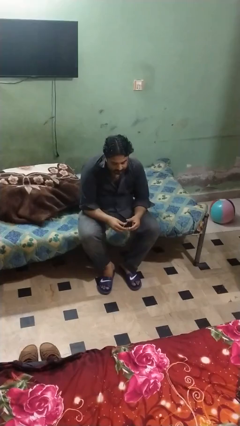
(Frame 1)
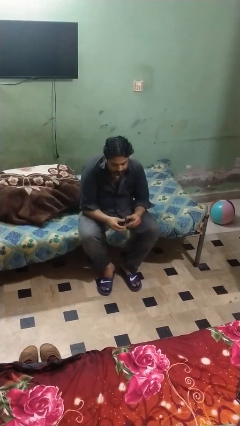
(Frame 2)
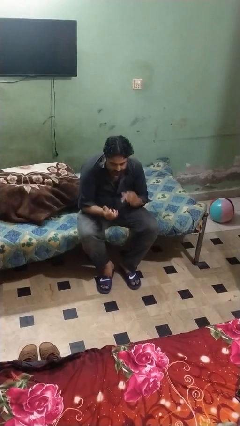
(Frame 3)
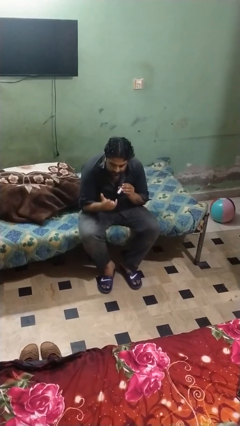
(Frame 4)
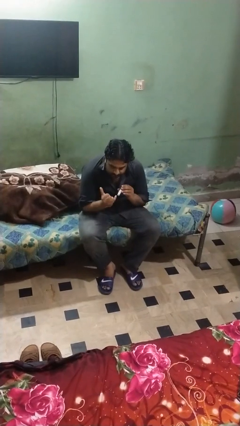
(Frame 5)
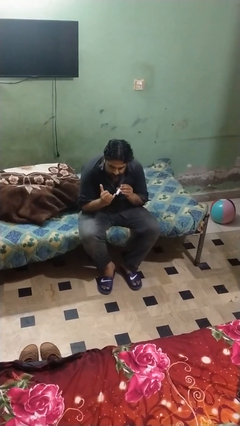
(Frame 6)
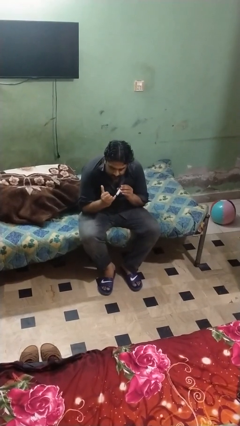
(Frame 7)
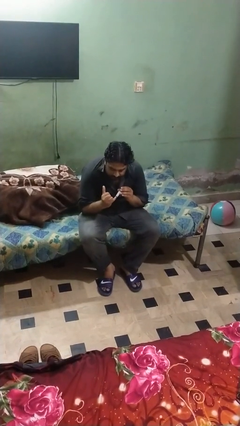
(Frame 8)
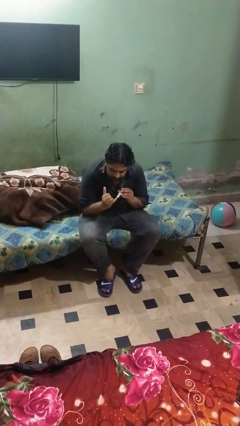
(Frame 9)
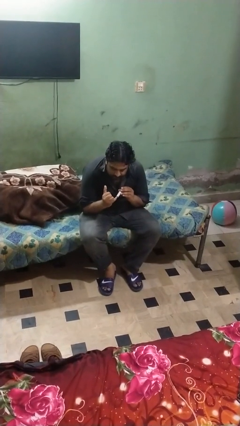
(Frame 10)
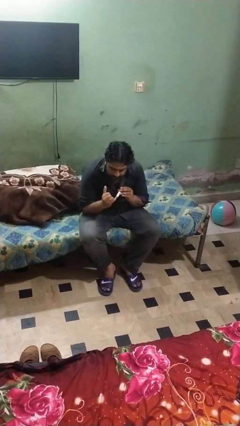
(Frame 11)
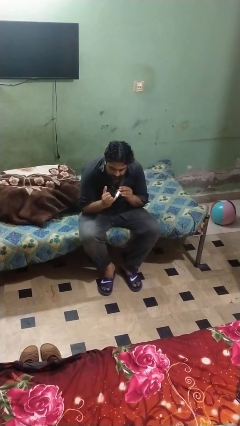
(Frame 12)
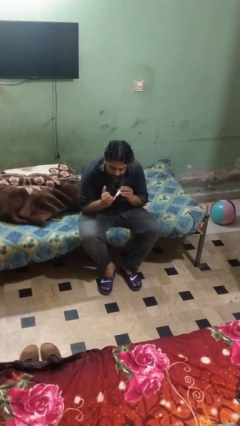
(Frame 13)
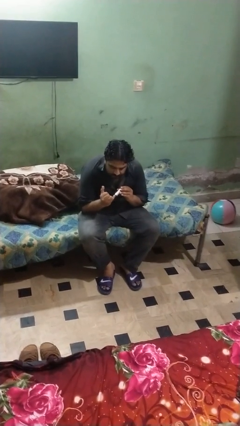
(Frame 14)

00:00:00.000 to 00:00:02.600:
person clips fingernails

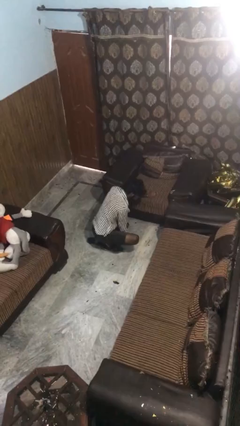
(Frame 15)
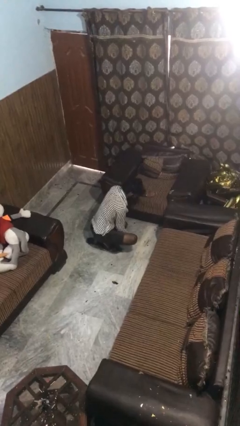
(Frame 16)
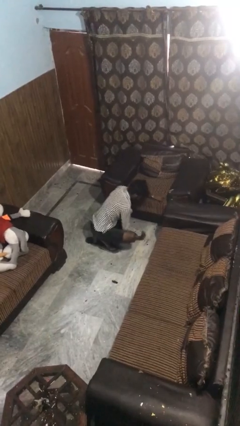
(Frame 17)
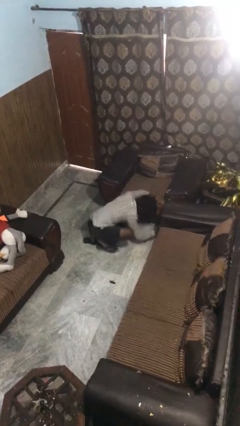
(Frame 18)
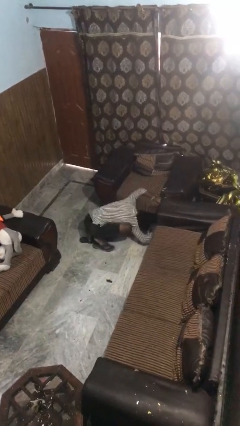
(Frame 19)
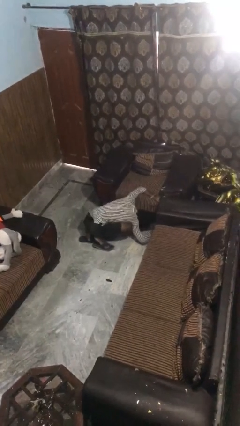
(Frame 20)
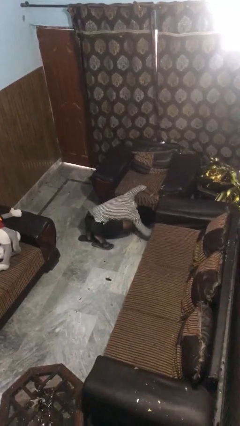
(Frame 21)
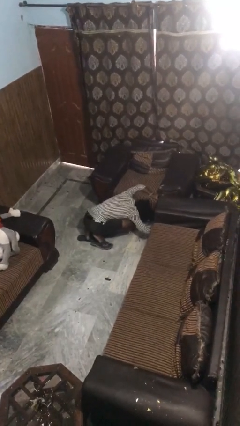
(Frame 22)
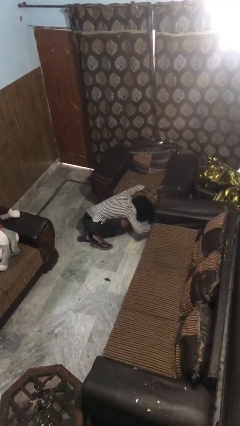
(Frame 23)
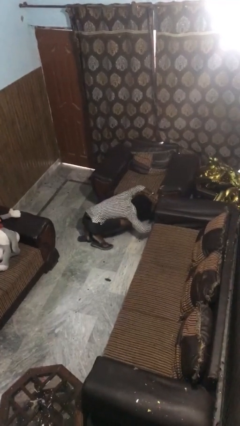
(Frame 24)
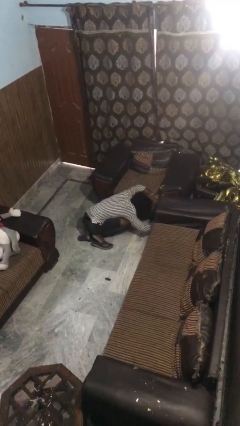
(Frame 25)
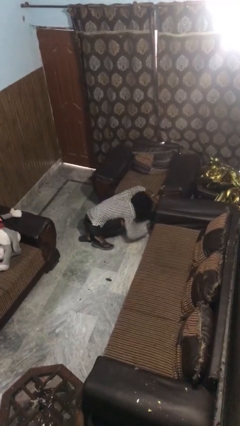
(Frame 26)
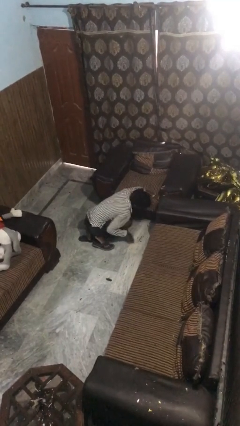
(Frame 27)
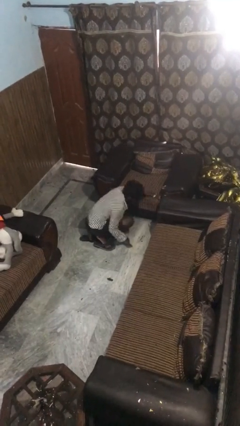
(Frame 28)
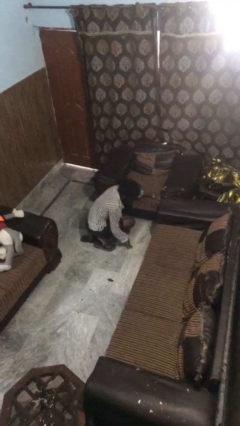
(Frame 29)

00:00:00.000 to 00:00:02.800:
person searches under couch

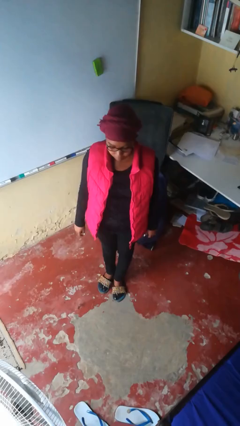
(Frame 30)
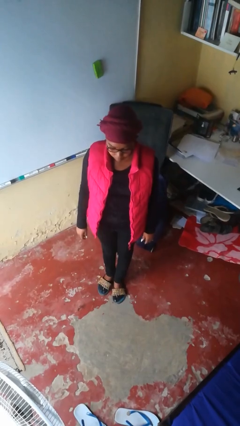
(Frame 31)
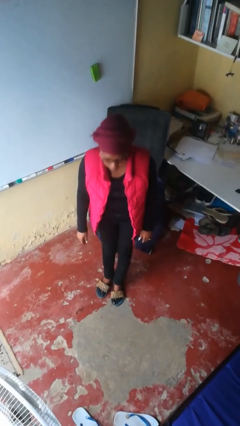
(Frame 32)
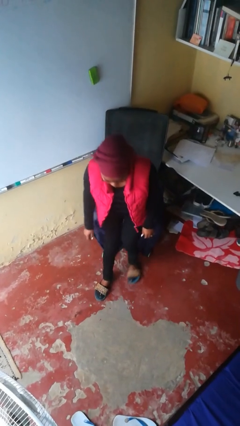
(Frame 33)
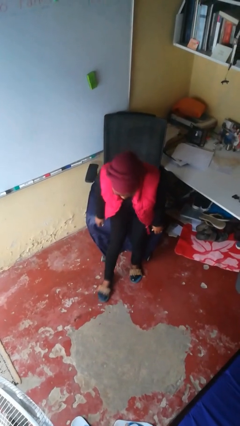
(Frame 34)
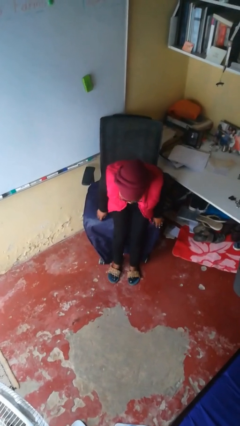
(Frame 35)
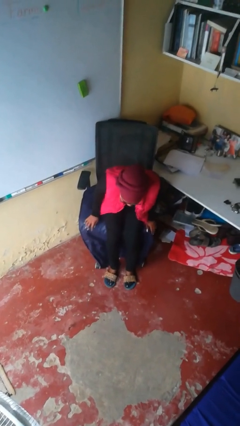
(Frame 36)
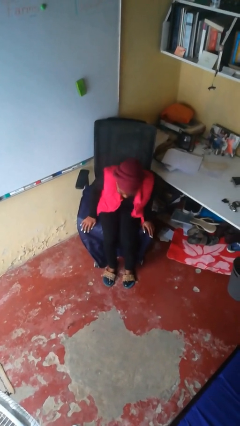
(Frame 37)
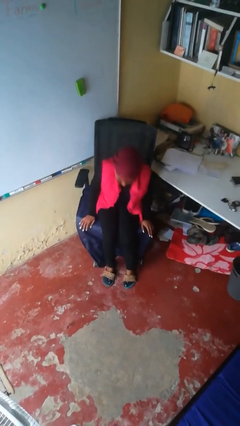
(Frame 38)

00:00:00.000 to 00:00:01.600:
person sits down

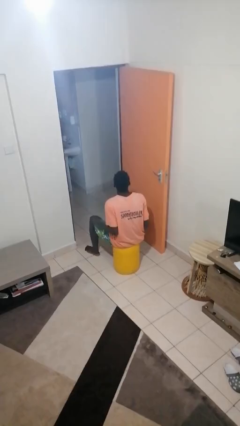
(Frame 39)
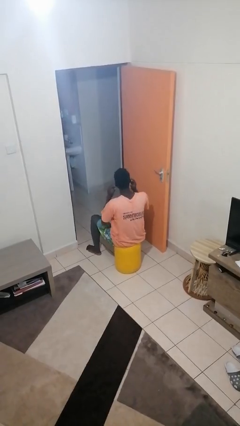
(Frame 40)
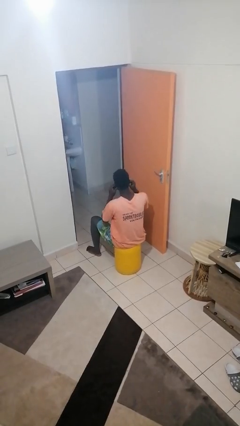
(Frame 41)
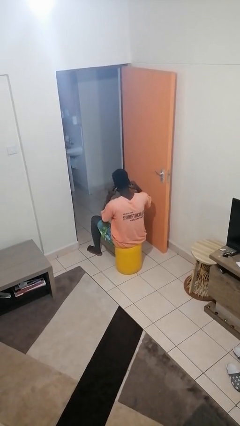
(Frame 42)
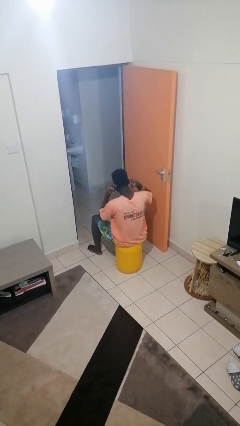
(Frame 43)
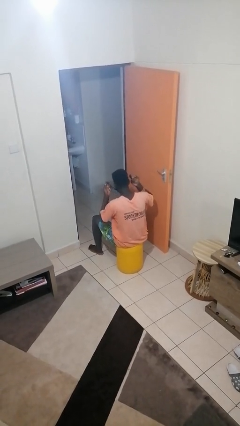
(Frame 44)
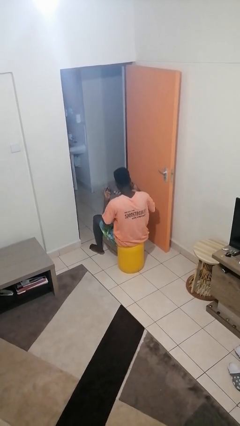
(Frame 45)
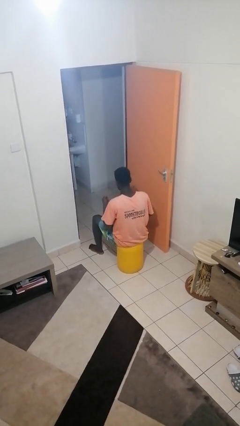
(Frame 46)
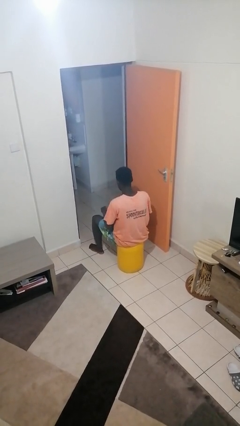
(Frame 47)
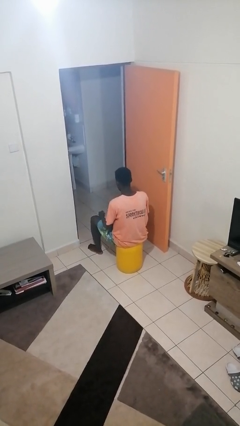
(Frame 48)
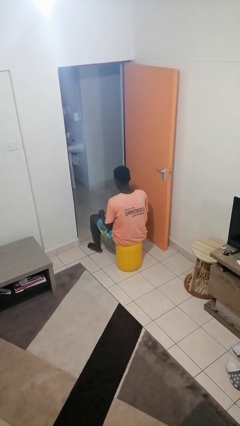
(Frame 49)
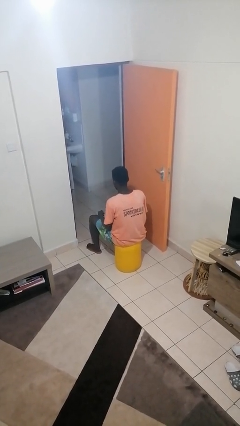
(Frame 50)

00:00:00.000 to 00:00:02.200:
person takes off facemask

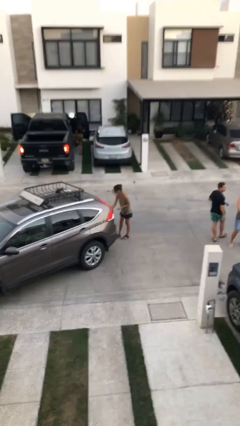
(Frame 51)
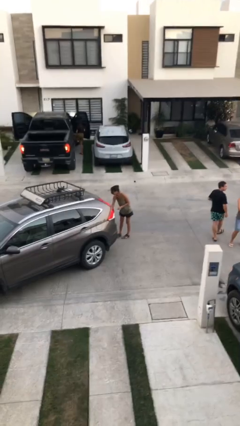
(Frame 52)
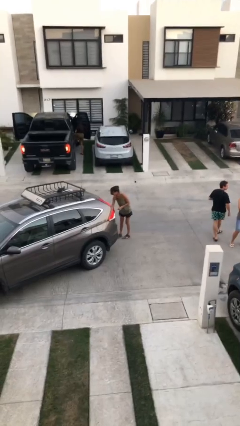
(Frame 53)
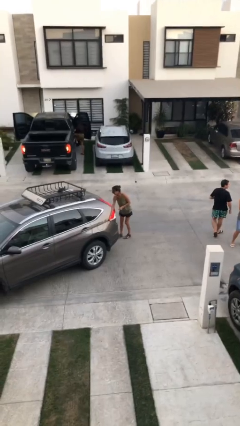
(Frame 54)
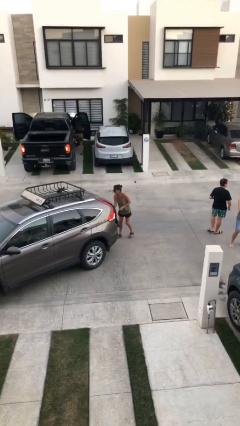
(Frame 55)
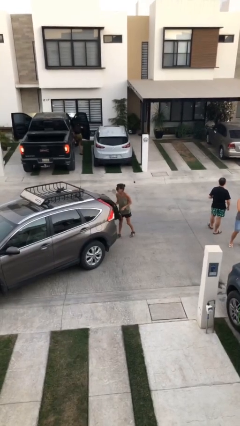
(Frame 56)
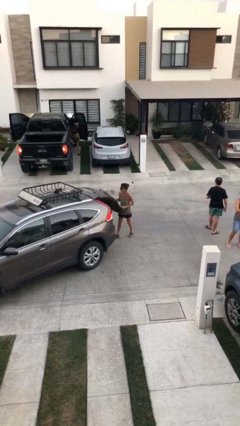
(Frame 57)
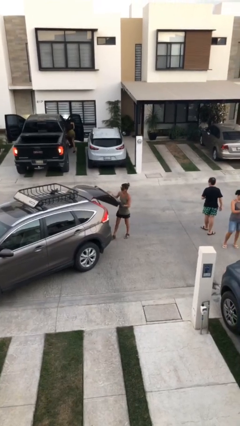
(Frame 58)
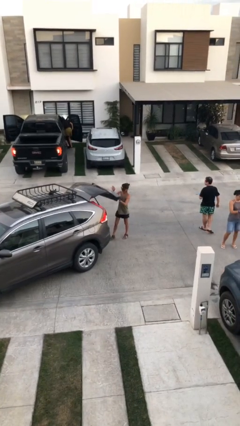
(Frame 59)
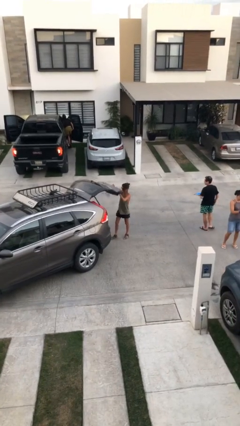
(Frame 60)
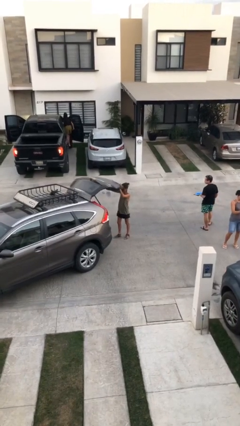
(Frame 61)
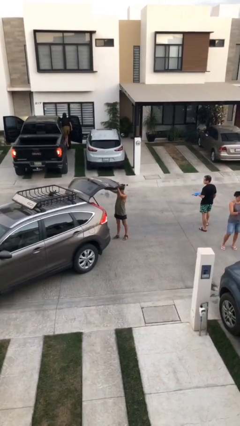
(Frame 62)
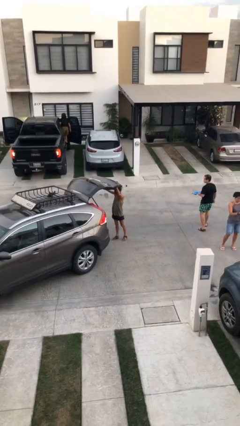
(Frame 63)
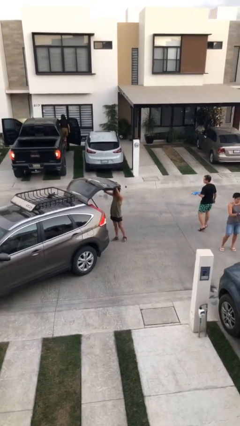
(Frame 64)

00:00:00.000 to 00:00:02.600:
person opens car trunk

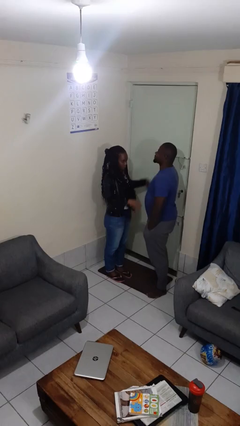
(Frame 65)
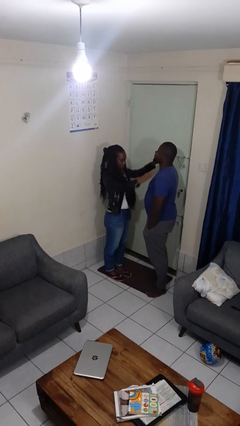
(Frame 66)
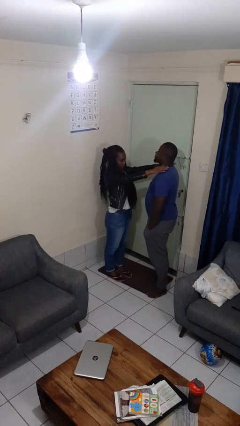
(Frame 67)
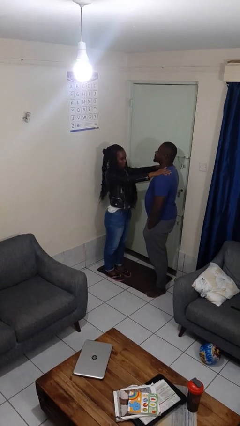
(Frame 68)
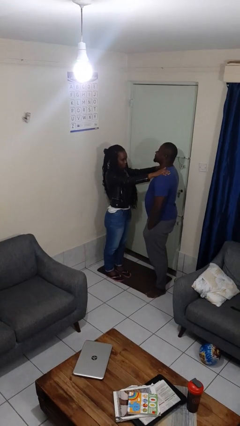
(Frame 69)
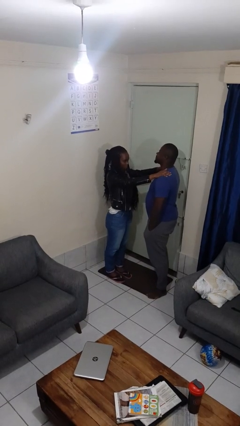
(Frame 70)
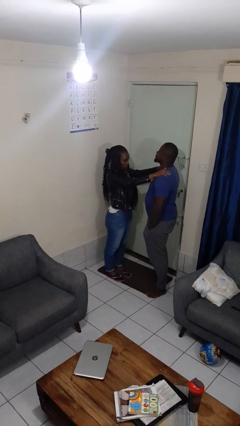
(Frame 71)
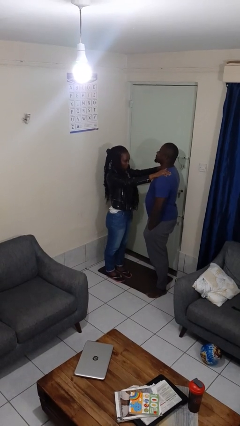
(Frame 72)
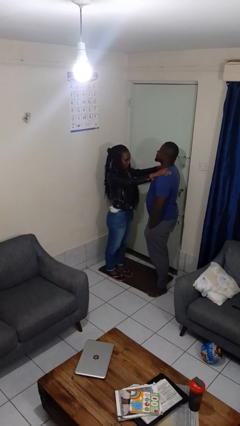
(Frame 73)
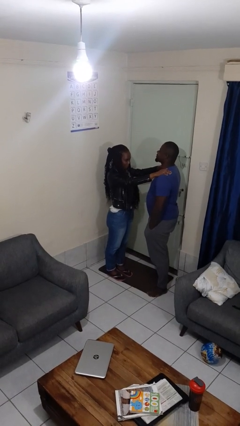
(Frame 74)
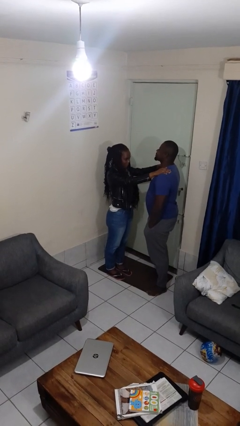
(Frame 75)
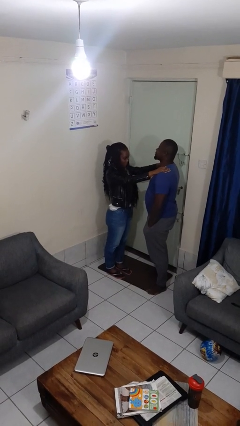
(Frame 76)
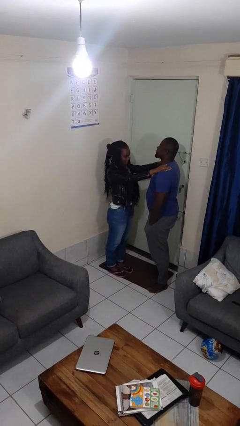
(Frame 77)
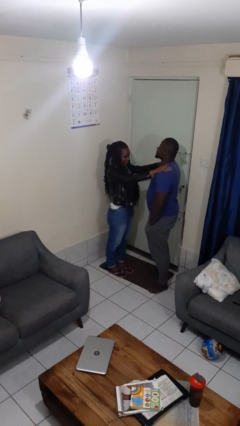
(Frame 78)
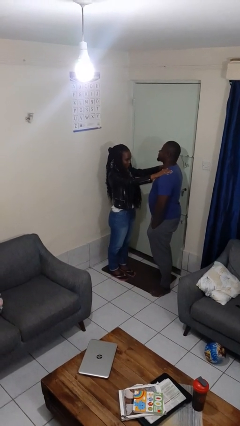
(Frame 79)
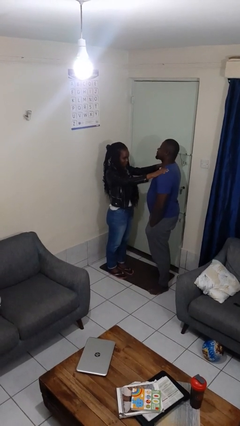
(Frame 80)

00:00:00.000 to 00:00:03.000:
person pounds shoulders of person

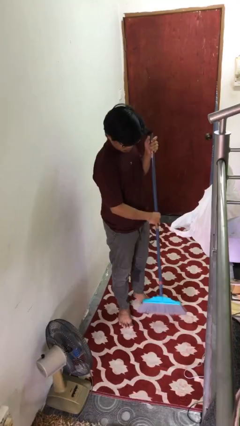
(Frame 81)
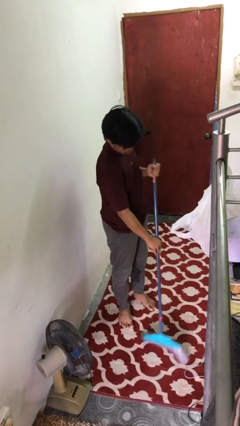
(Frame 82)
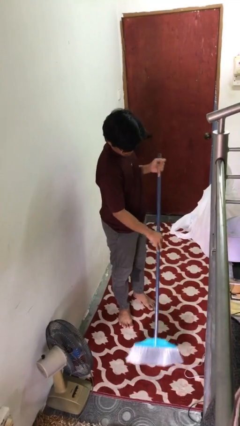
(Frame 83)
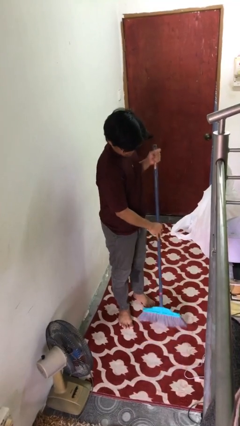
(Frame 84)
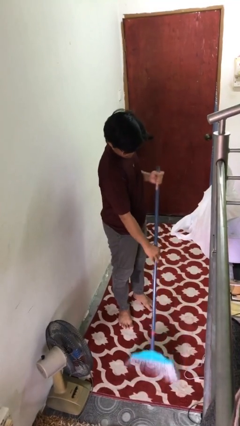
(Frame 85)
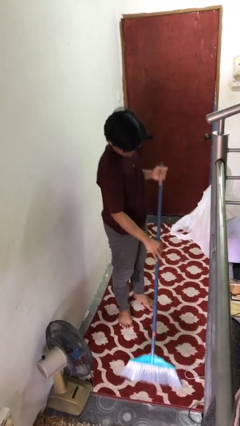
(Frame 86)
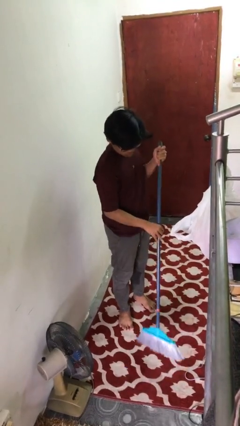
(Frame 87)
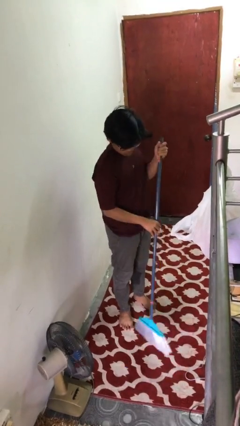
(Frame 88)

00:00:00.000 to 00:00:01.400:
person sweeps floor

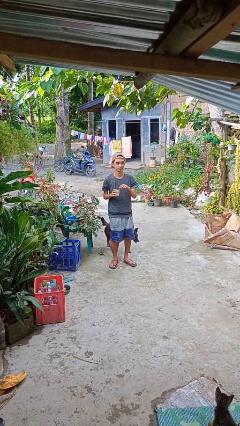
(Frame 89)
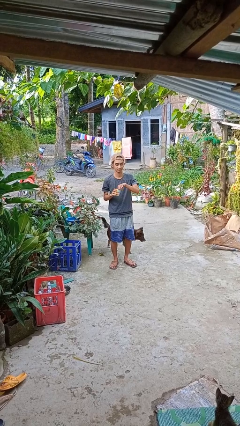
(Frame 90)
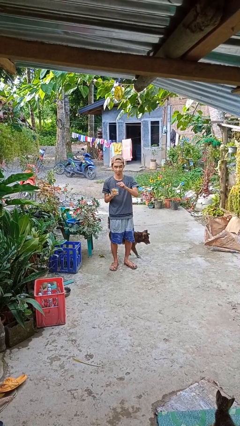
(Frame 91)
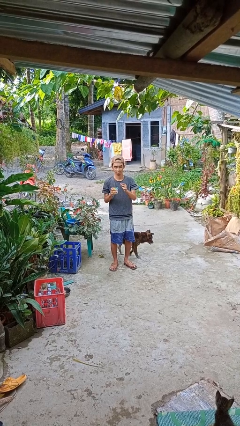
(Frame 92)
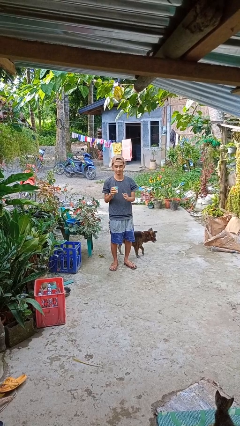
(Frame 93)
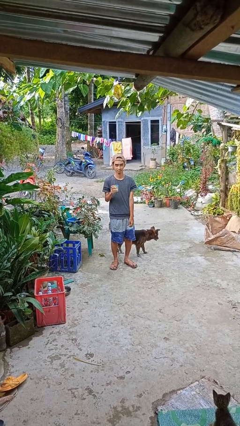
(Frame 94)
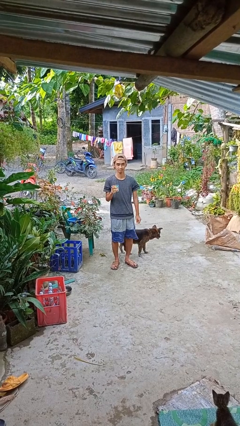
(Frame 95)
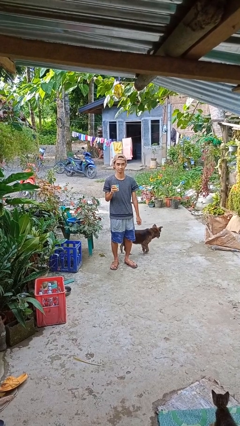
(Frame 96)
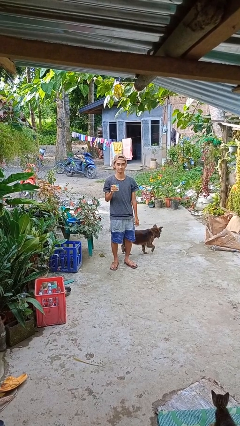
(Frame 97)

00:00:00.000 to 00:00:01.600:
person opens beverage can
